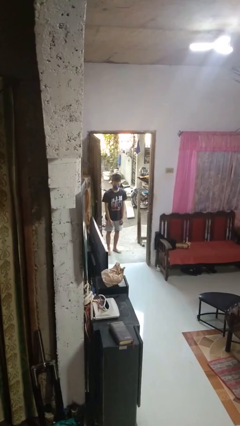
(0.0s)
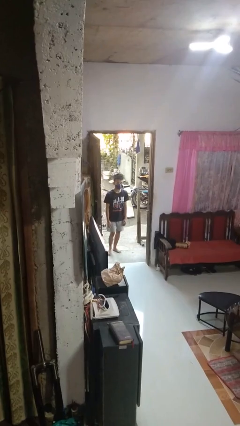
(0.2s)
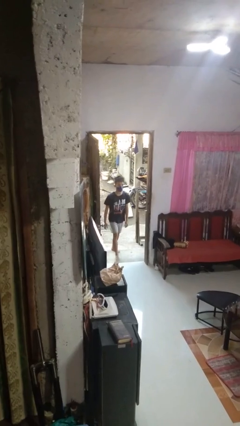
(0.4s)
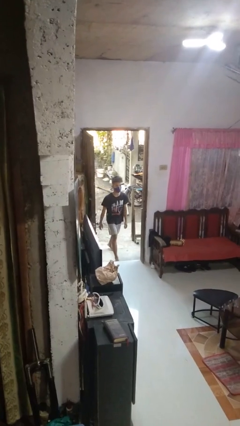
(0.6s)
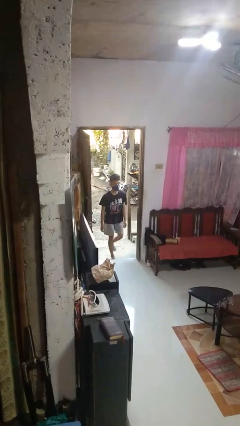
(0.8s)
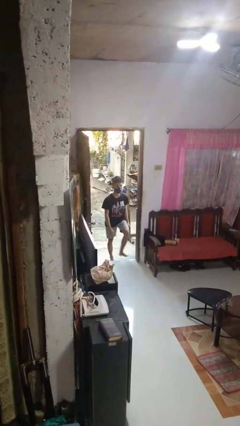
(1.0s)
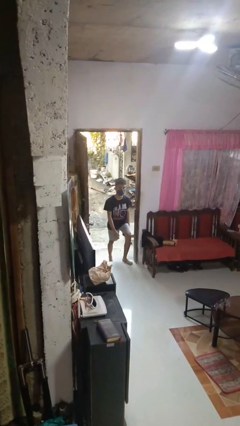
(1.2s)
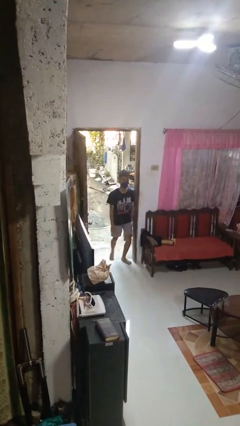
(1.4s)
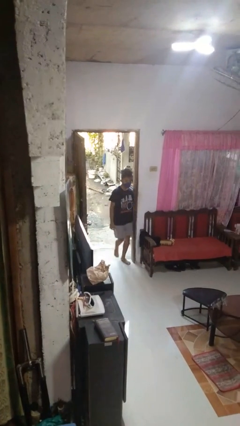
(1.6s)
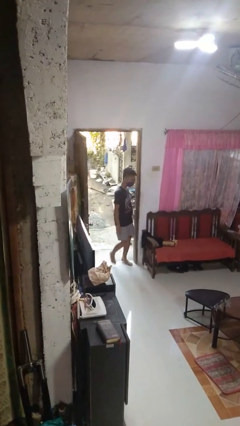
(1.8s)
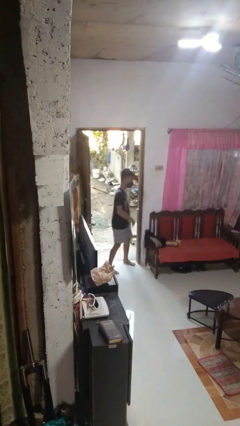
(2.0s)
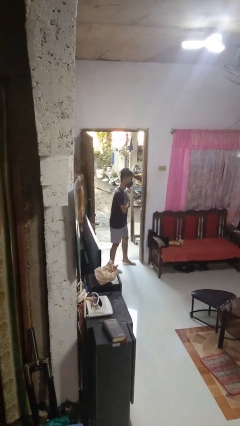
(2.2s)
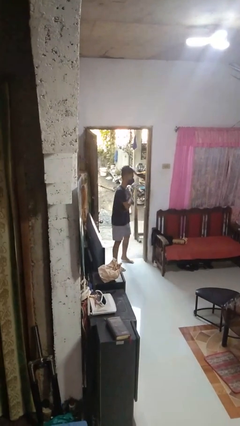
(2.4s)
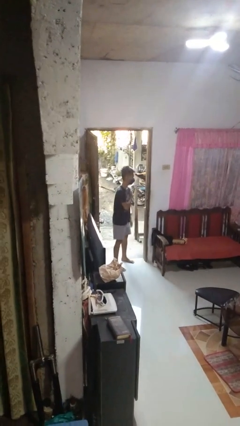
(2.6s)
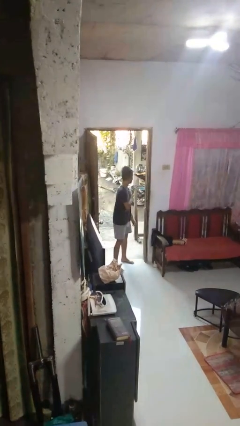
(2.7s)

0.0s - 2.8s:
person bumps into wall

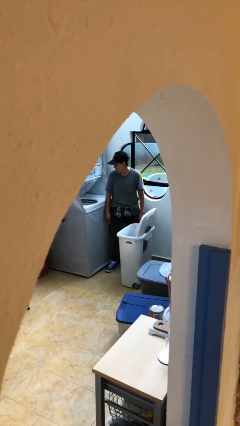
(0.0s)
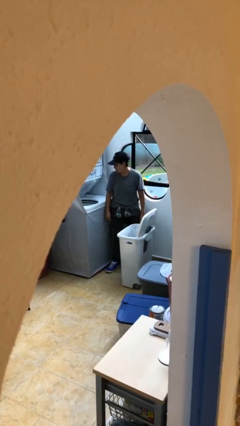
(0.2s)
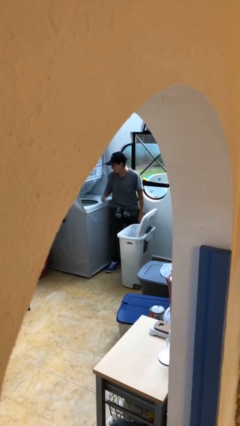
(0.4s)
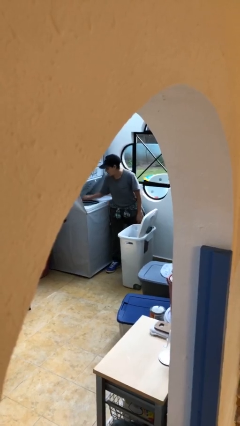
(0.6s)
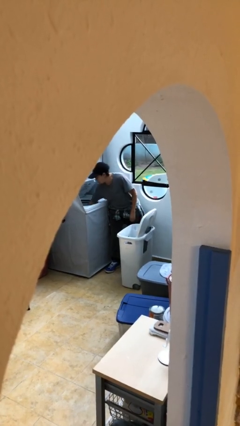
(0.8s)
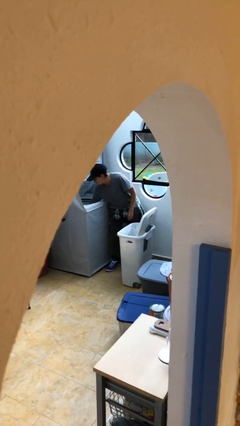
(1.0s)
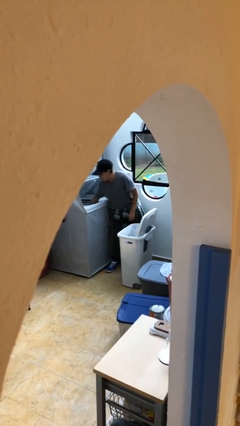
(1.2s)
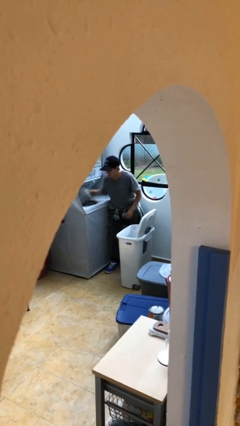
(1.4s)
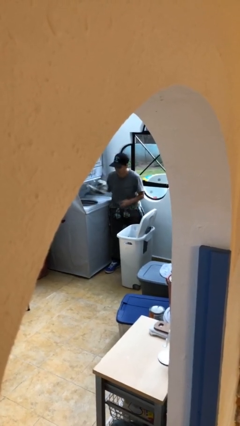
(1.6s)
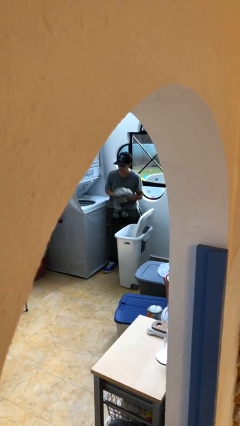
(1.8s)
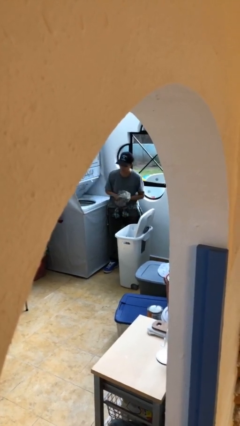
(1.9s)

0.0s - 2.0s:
person loads clotheswasher

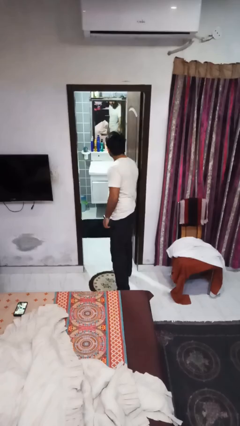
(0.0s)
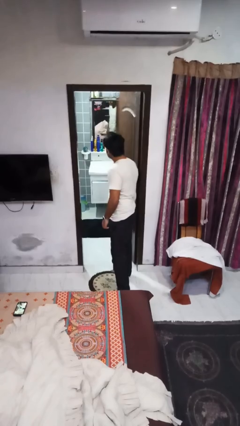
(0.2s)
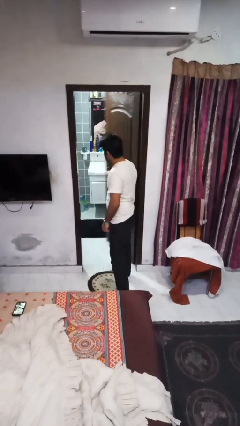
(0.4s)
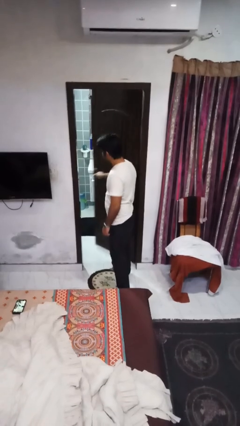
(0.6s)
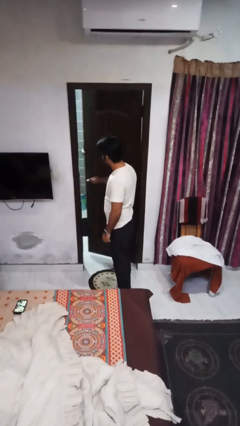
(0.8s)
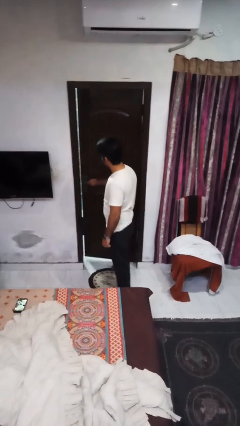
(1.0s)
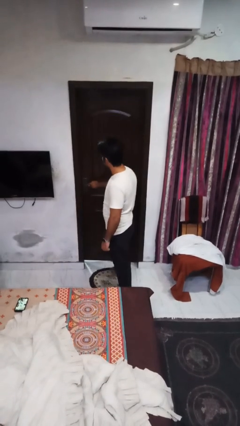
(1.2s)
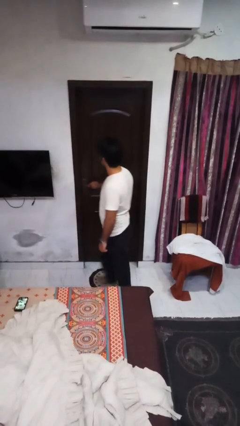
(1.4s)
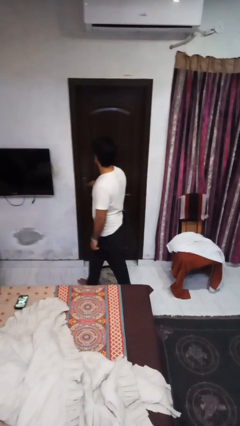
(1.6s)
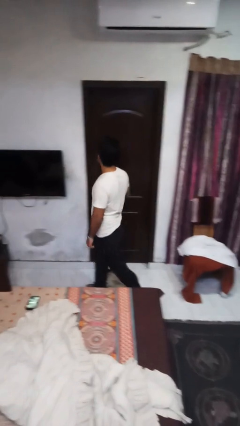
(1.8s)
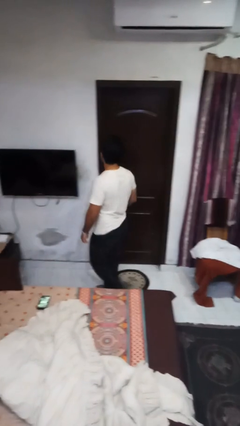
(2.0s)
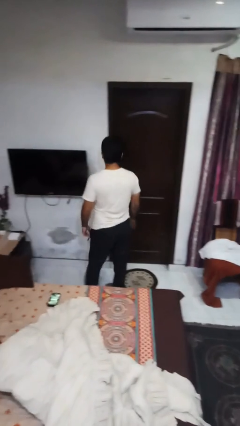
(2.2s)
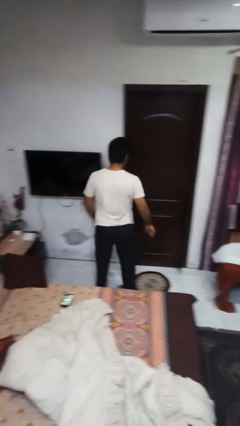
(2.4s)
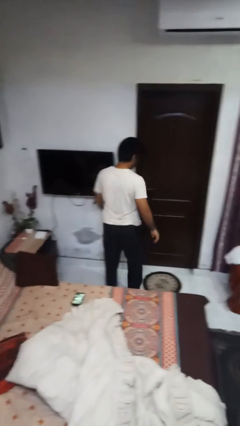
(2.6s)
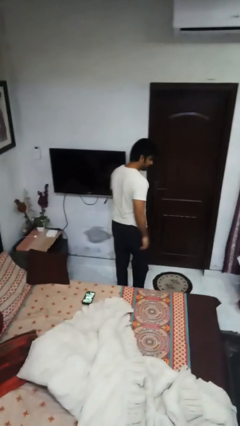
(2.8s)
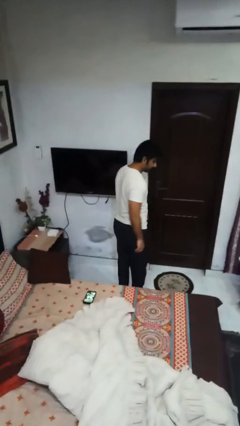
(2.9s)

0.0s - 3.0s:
person closes facility door

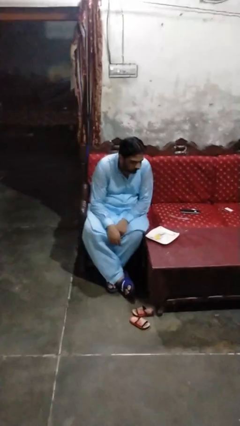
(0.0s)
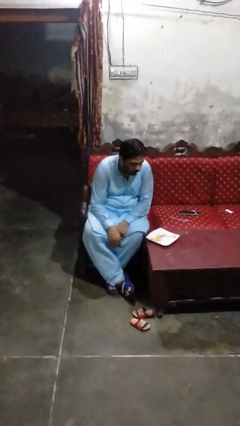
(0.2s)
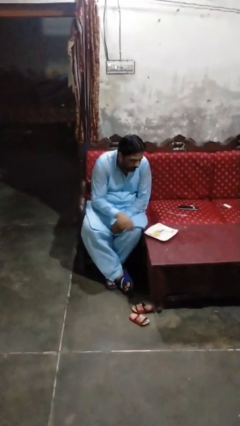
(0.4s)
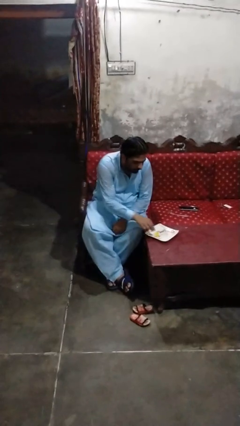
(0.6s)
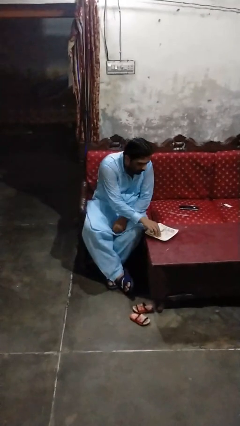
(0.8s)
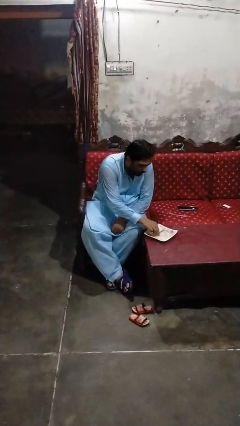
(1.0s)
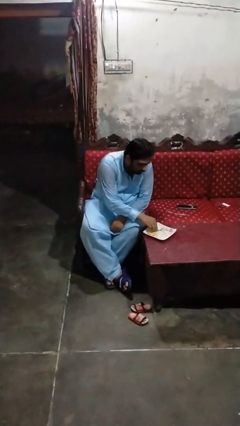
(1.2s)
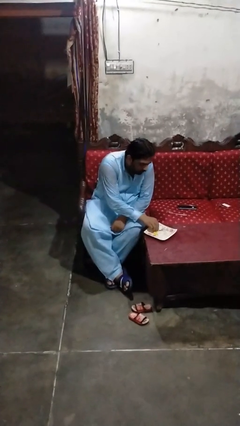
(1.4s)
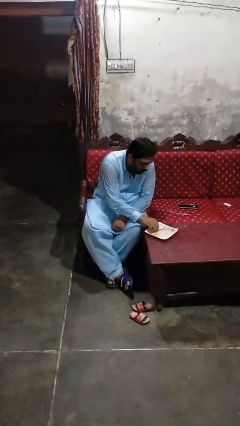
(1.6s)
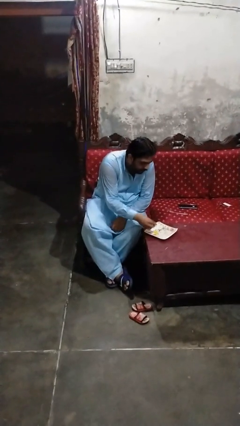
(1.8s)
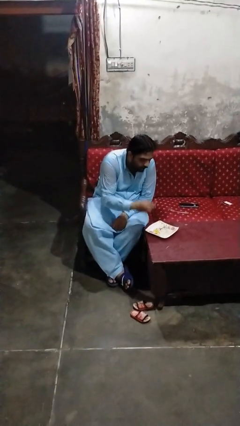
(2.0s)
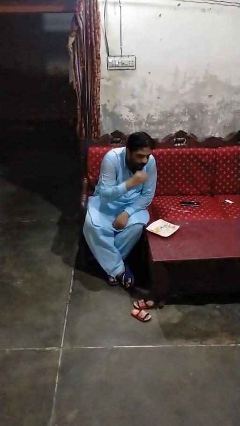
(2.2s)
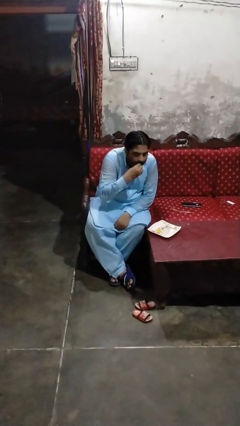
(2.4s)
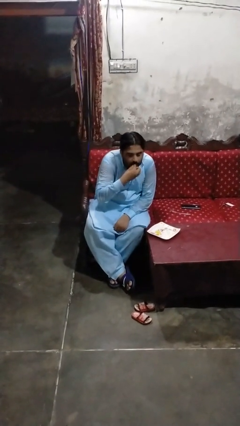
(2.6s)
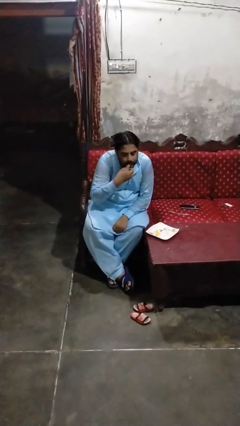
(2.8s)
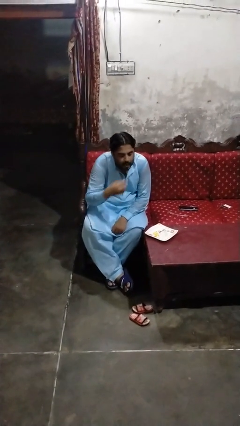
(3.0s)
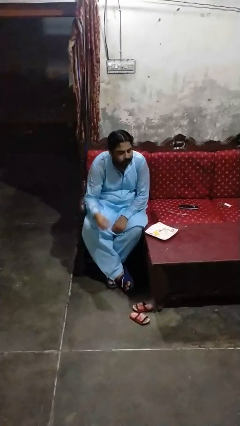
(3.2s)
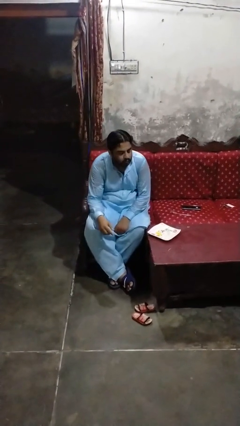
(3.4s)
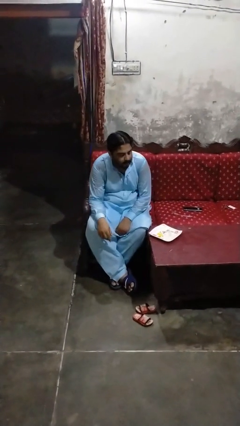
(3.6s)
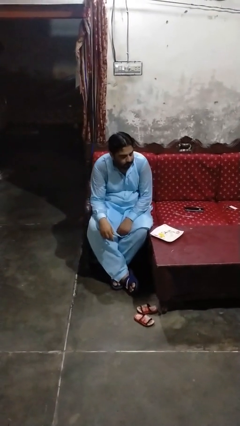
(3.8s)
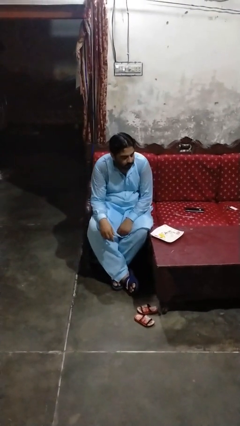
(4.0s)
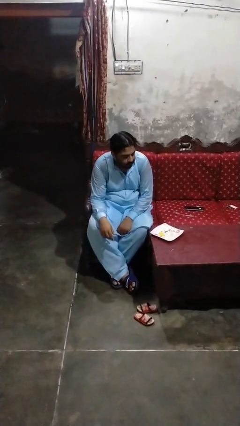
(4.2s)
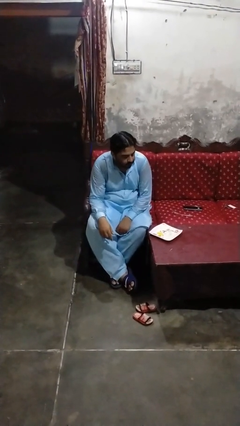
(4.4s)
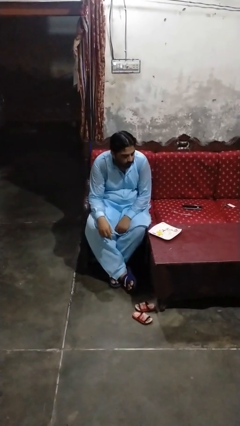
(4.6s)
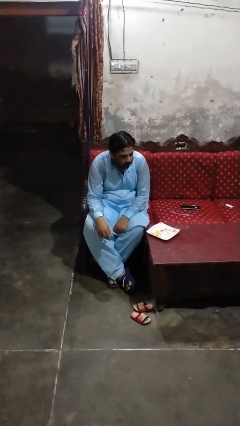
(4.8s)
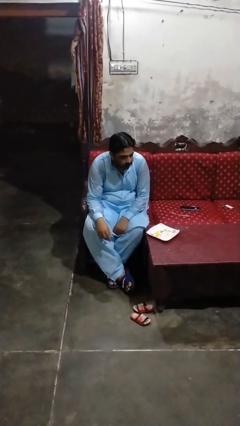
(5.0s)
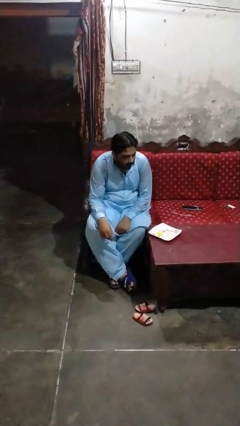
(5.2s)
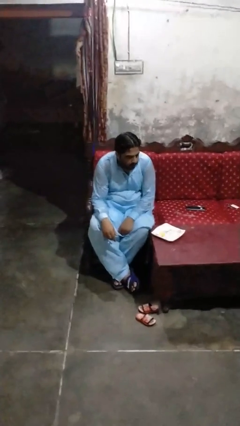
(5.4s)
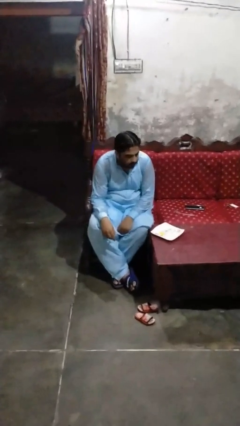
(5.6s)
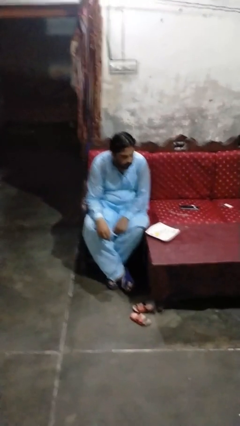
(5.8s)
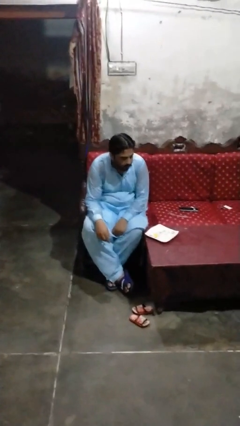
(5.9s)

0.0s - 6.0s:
person eats with hands

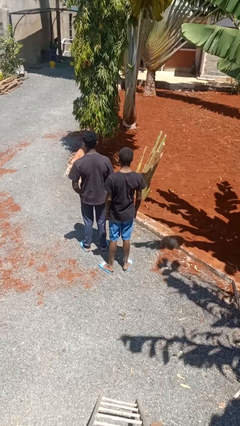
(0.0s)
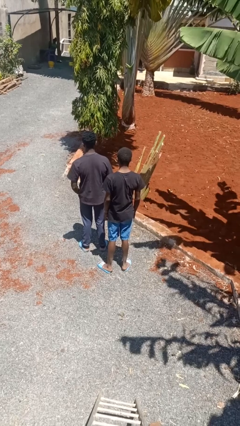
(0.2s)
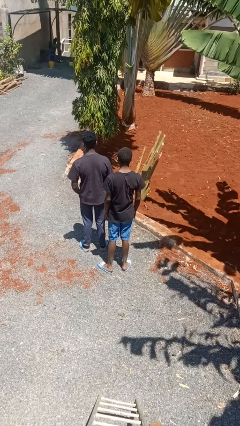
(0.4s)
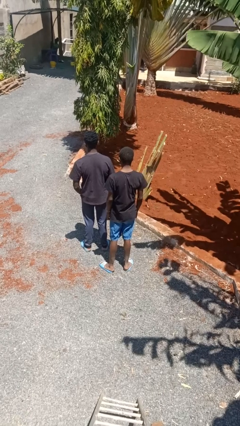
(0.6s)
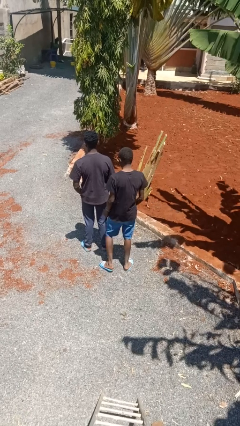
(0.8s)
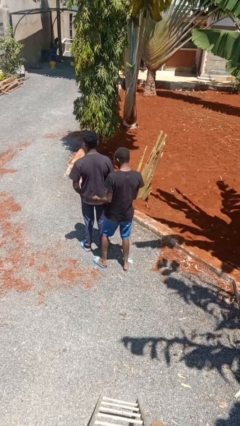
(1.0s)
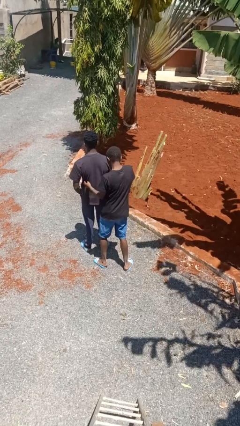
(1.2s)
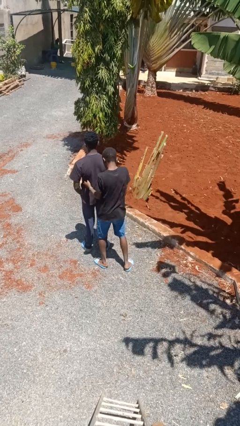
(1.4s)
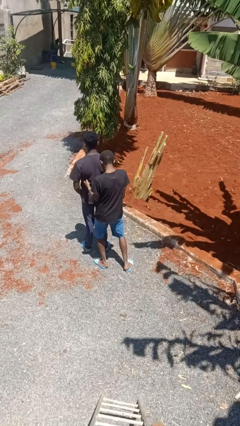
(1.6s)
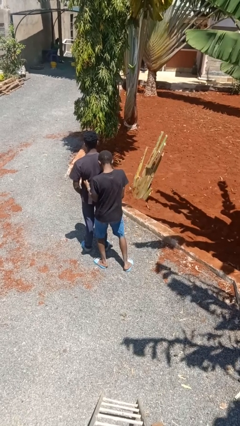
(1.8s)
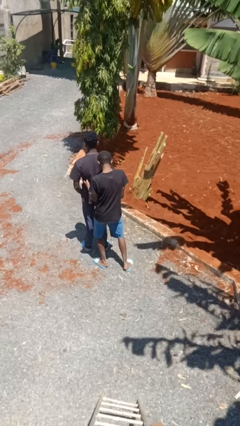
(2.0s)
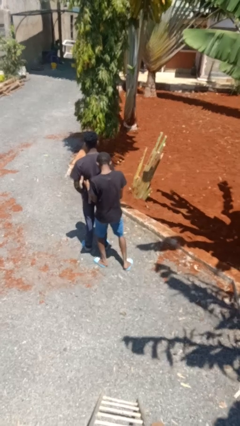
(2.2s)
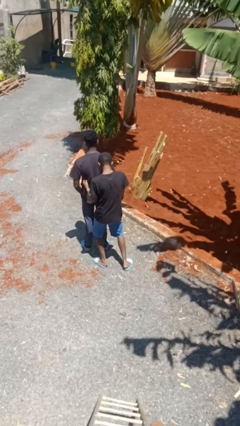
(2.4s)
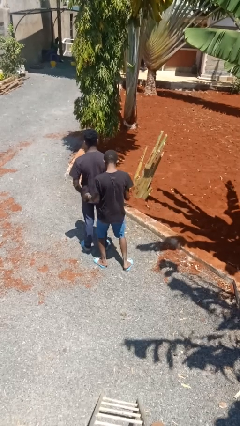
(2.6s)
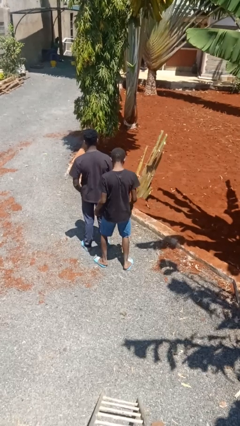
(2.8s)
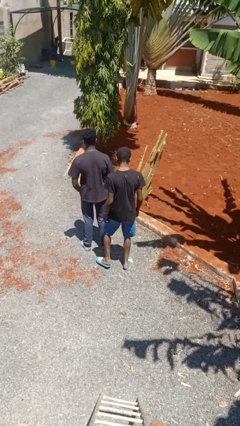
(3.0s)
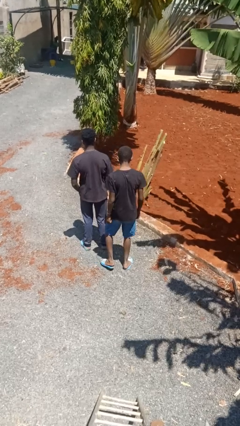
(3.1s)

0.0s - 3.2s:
person tickles person

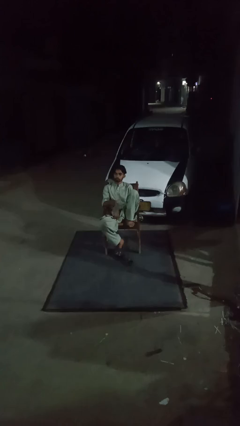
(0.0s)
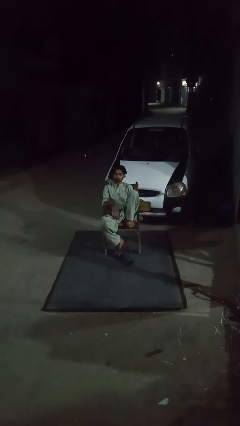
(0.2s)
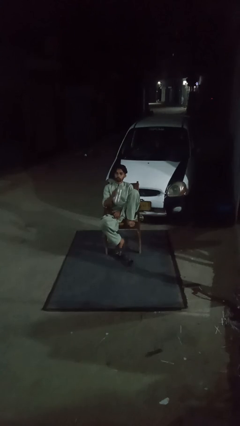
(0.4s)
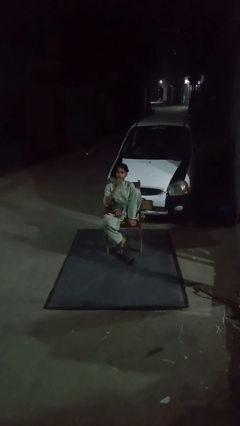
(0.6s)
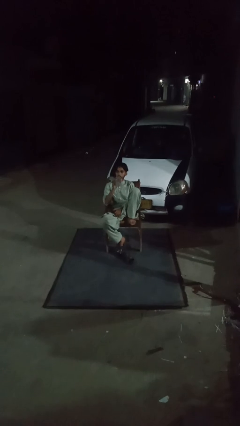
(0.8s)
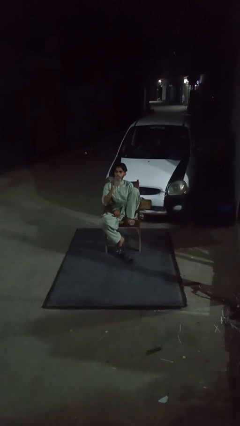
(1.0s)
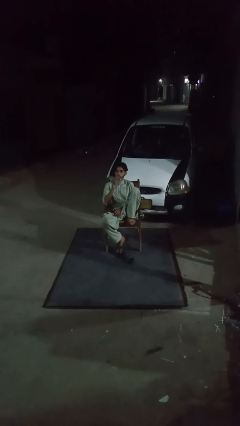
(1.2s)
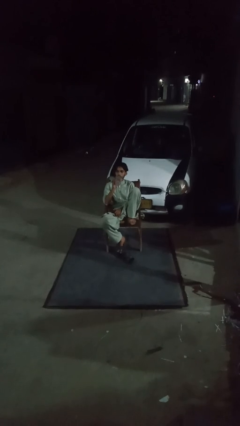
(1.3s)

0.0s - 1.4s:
person drinks from bottle
